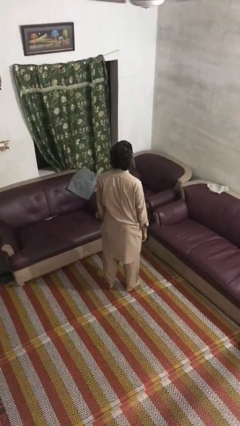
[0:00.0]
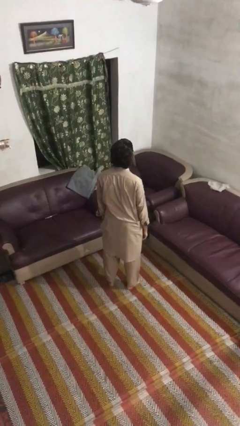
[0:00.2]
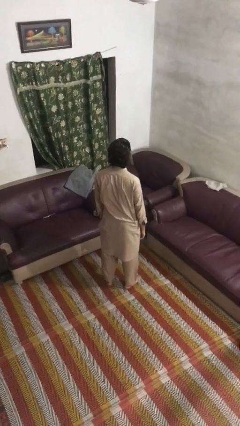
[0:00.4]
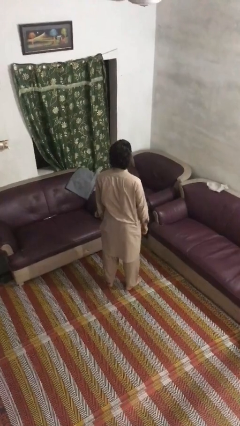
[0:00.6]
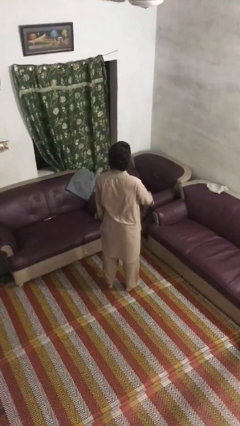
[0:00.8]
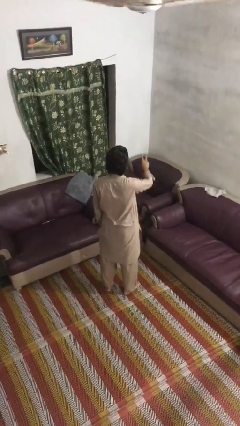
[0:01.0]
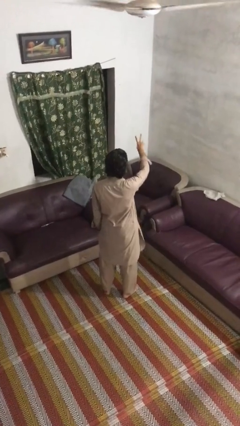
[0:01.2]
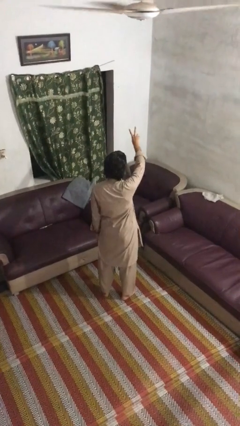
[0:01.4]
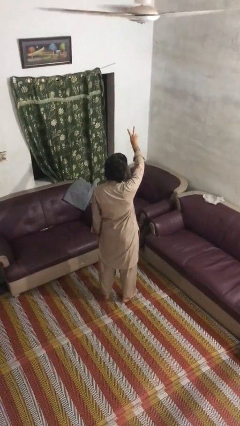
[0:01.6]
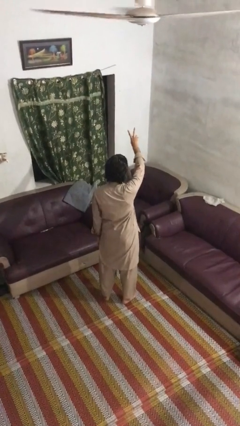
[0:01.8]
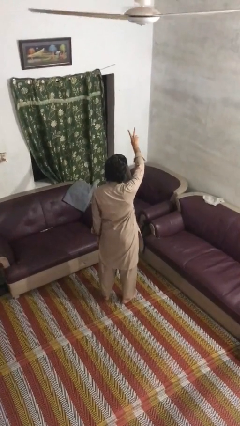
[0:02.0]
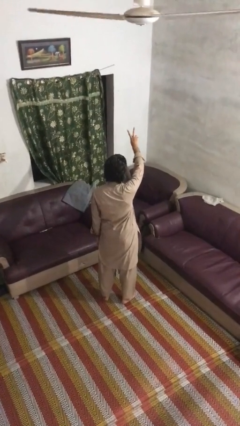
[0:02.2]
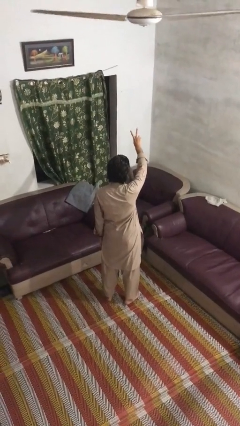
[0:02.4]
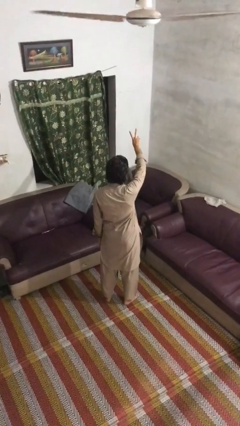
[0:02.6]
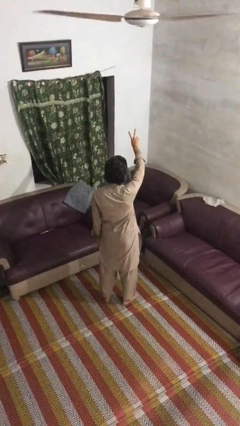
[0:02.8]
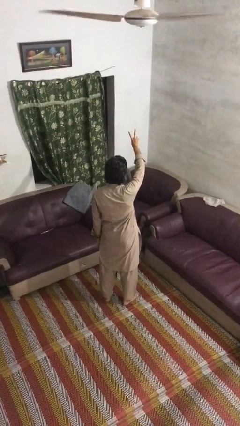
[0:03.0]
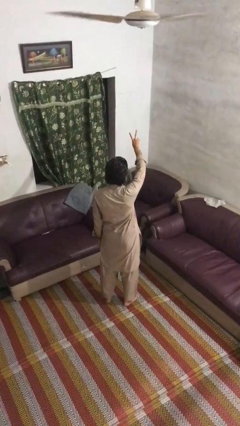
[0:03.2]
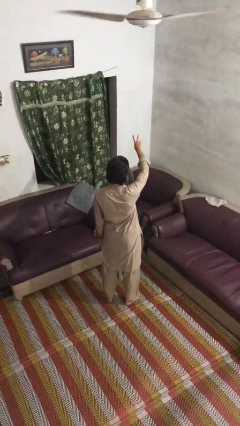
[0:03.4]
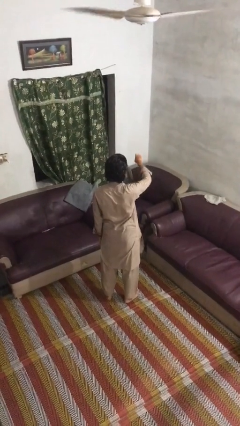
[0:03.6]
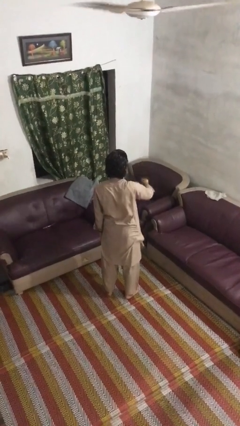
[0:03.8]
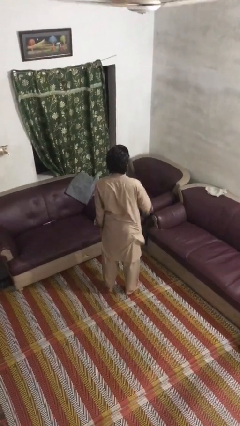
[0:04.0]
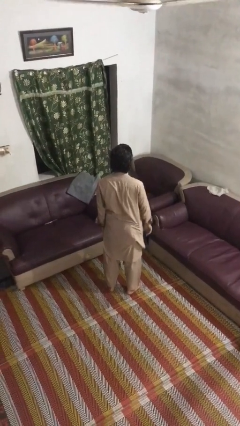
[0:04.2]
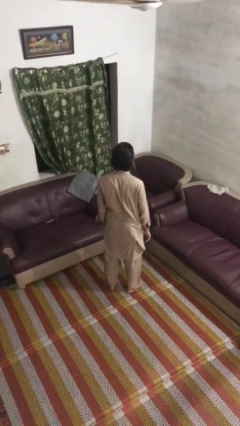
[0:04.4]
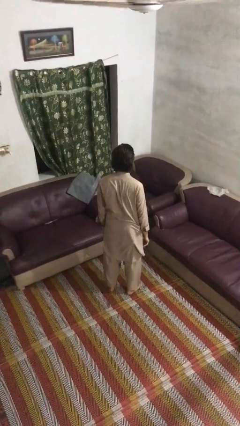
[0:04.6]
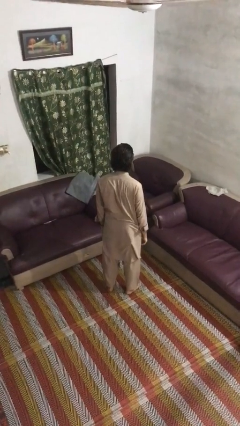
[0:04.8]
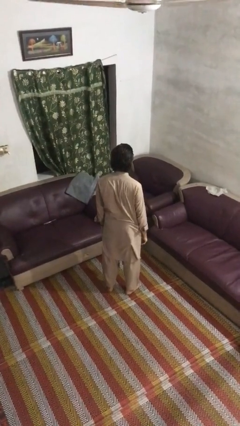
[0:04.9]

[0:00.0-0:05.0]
person gestures peace

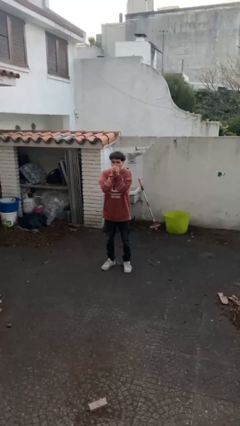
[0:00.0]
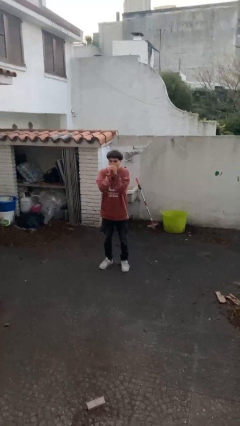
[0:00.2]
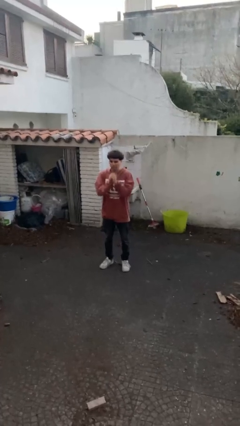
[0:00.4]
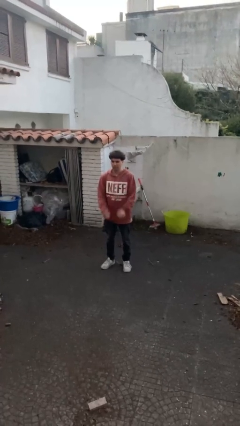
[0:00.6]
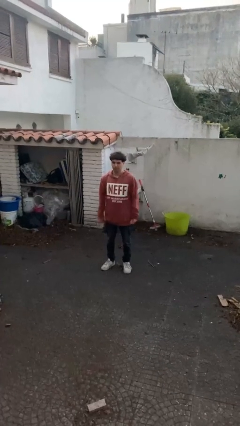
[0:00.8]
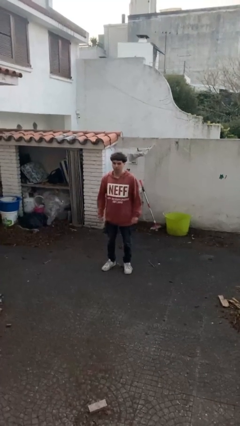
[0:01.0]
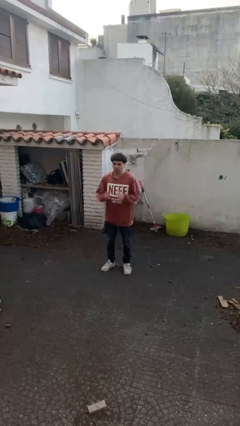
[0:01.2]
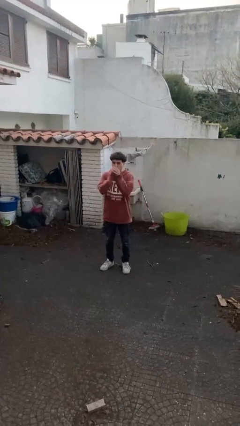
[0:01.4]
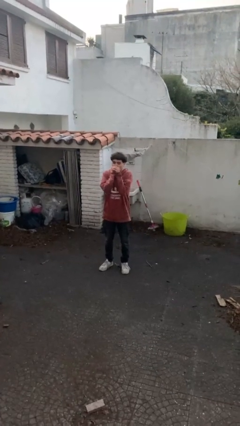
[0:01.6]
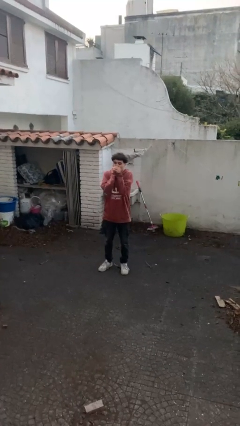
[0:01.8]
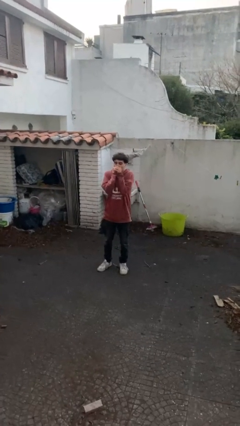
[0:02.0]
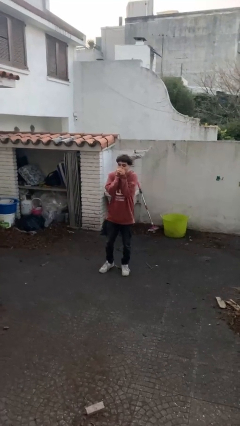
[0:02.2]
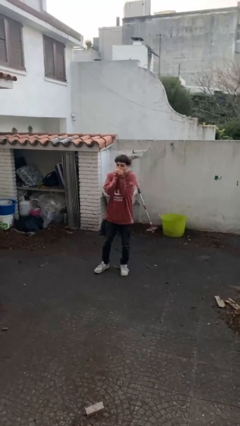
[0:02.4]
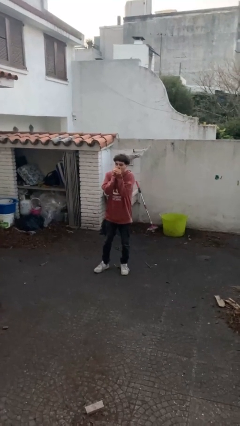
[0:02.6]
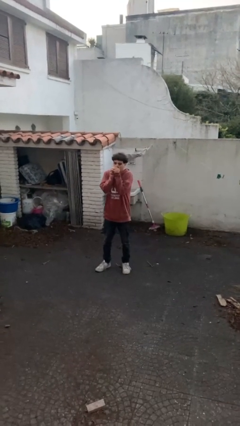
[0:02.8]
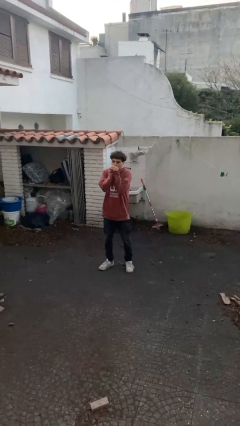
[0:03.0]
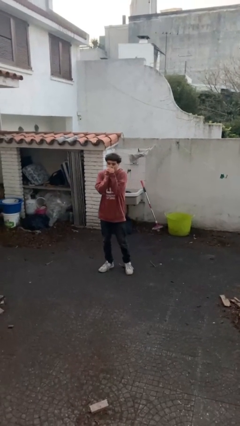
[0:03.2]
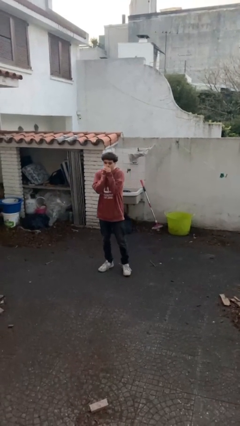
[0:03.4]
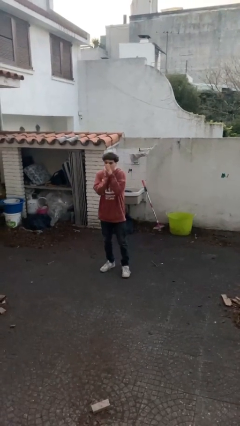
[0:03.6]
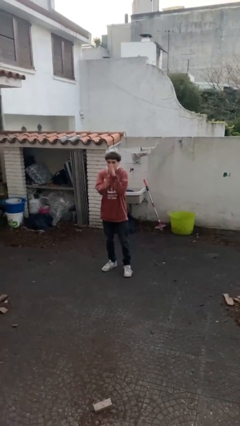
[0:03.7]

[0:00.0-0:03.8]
person blows into hands

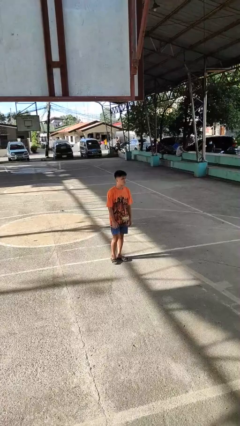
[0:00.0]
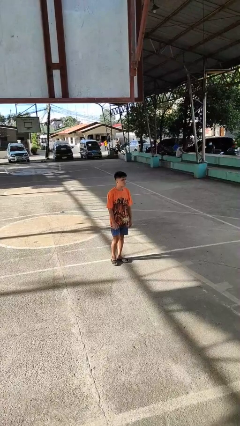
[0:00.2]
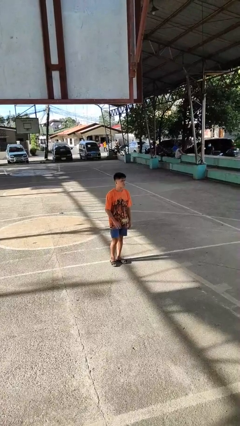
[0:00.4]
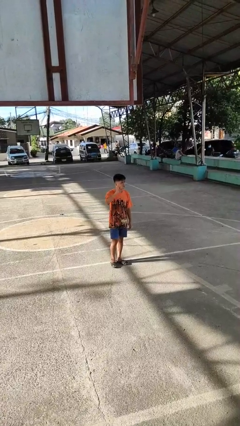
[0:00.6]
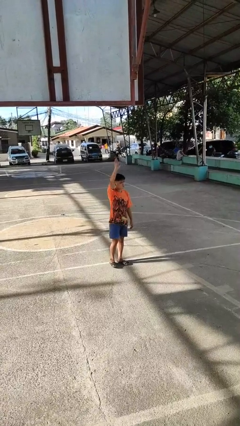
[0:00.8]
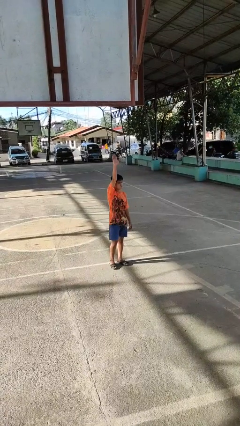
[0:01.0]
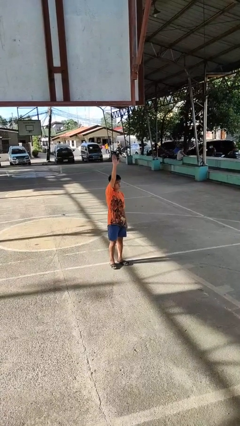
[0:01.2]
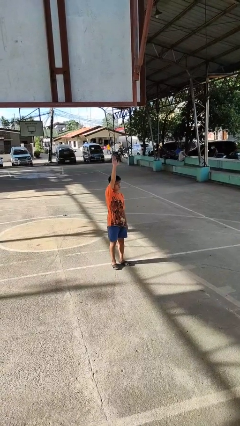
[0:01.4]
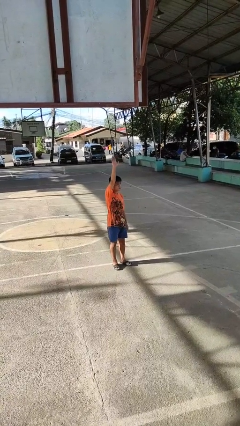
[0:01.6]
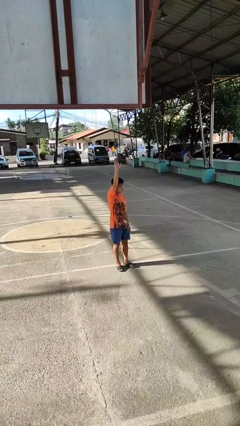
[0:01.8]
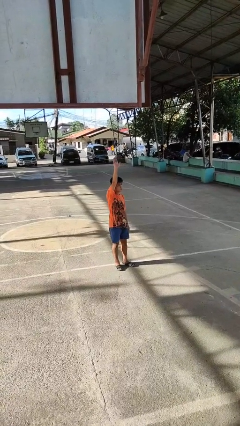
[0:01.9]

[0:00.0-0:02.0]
person gestures raise hand

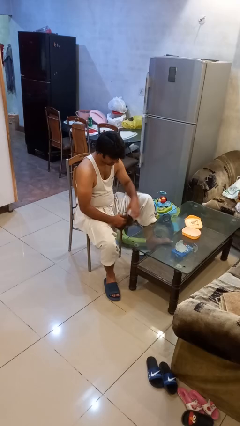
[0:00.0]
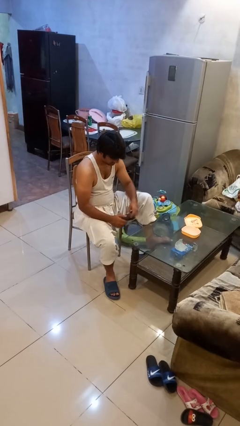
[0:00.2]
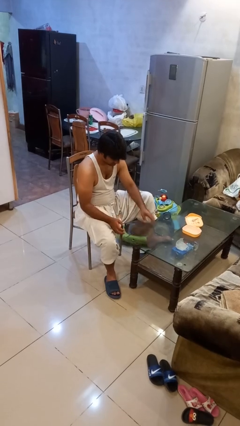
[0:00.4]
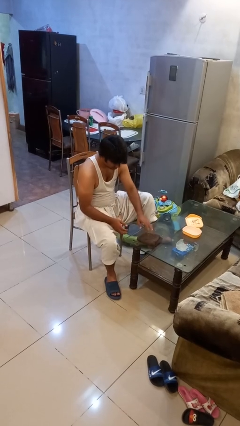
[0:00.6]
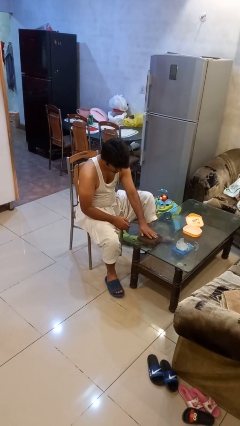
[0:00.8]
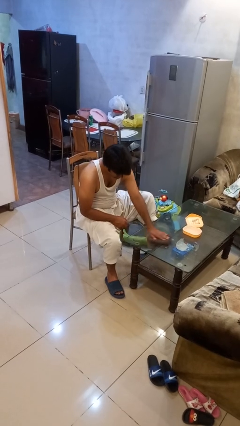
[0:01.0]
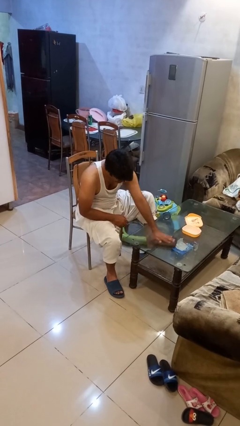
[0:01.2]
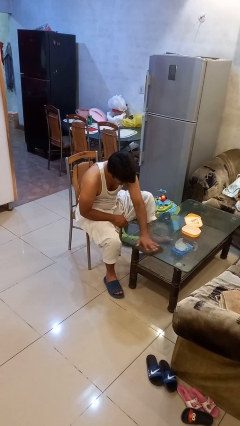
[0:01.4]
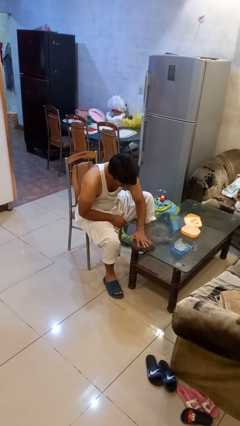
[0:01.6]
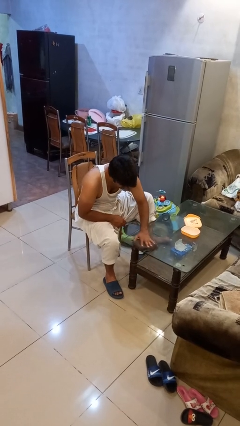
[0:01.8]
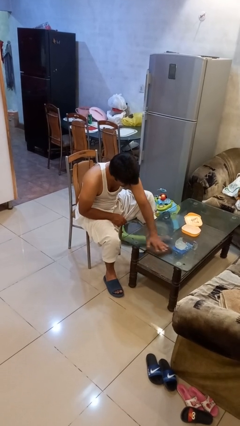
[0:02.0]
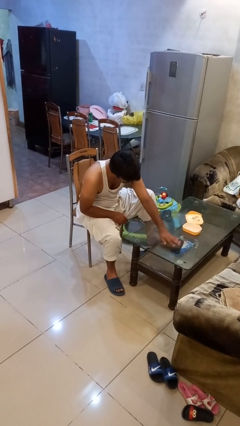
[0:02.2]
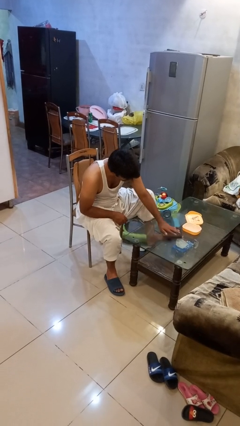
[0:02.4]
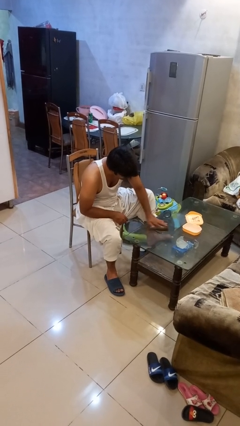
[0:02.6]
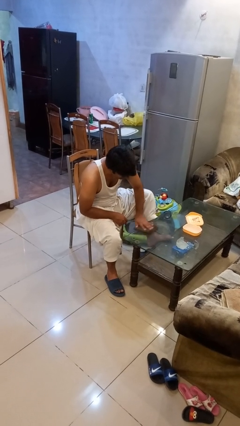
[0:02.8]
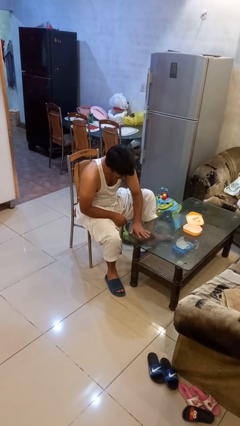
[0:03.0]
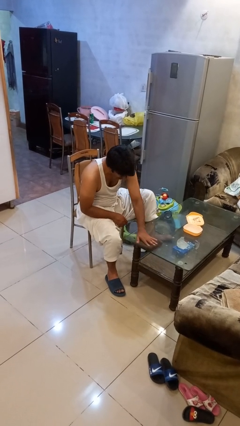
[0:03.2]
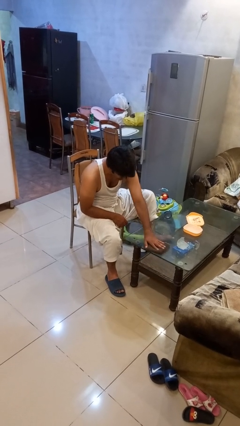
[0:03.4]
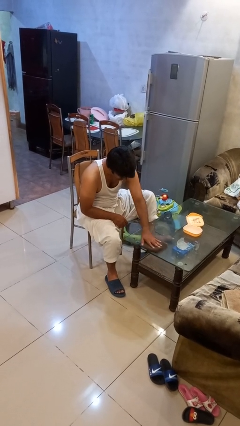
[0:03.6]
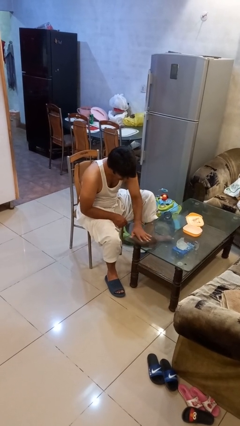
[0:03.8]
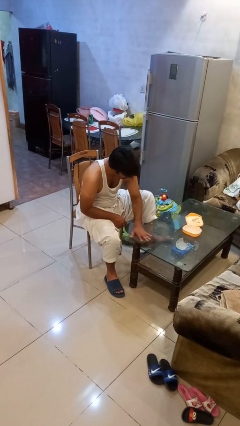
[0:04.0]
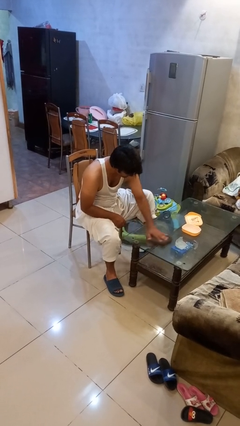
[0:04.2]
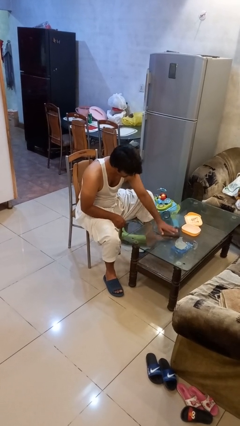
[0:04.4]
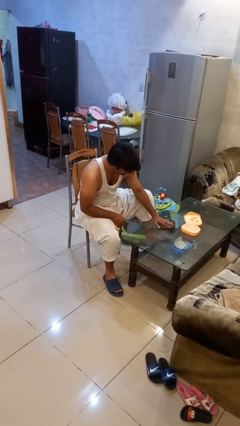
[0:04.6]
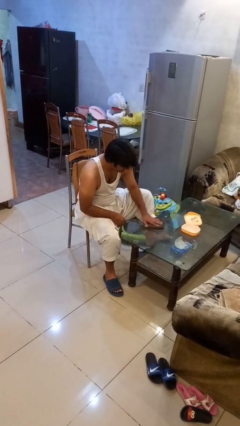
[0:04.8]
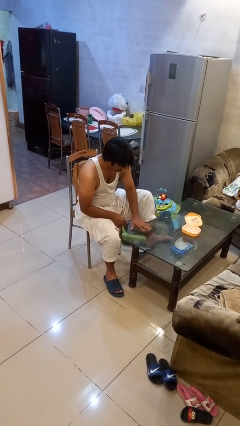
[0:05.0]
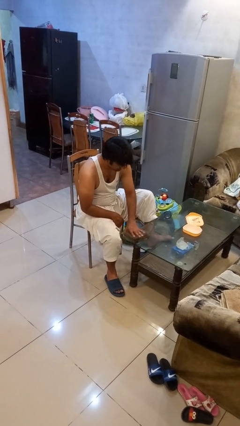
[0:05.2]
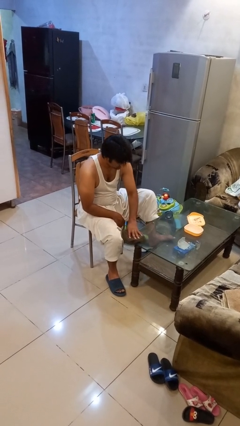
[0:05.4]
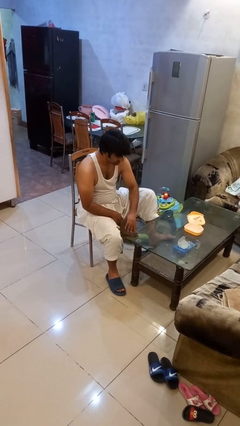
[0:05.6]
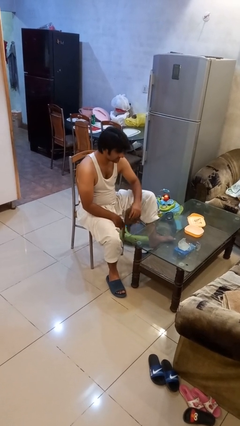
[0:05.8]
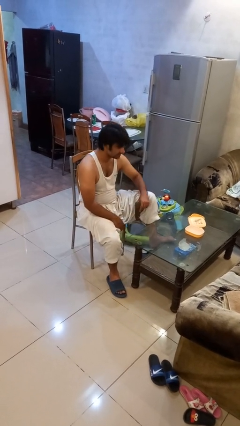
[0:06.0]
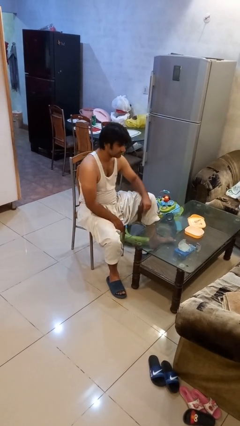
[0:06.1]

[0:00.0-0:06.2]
person cleans table with rag

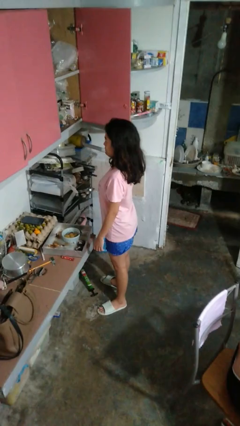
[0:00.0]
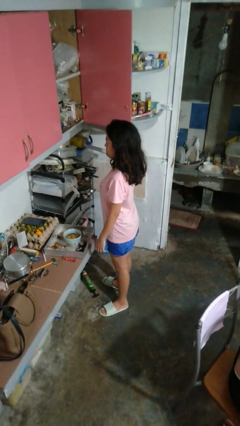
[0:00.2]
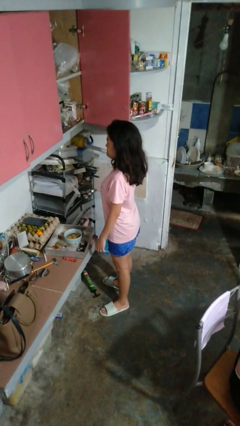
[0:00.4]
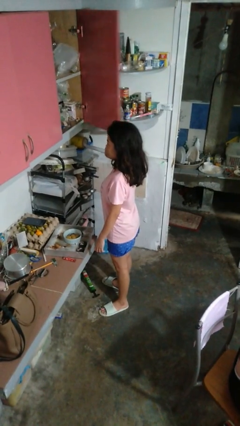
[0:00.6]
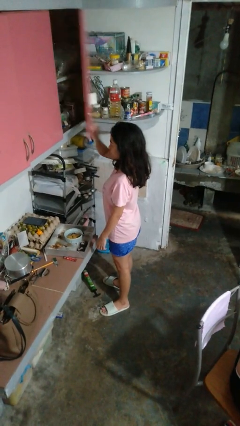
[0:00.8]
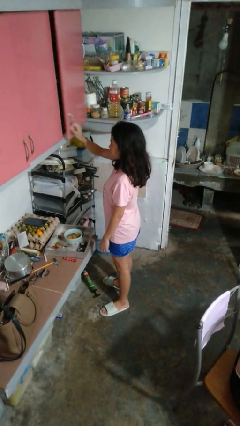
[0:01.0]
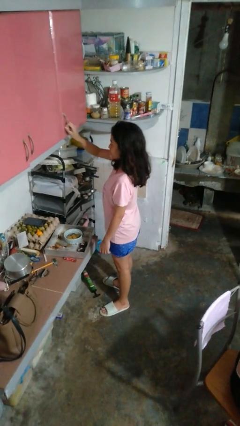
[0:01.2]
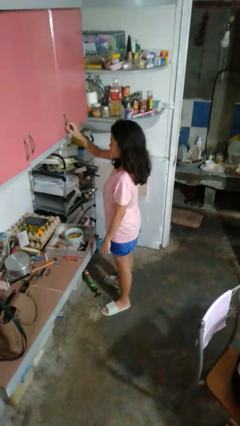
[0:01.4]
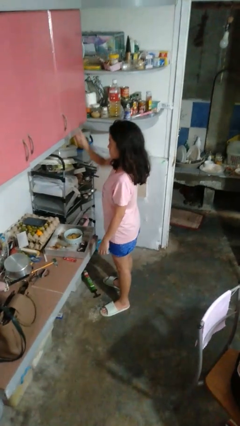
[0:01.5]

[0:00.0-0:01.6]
person closes cabinet
